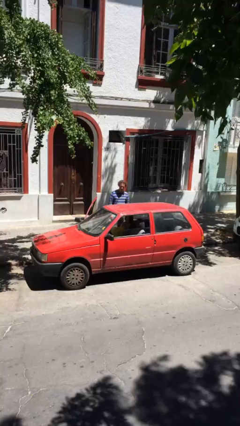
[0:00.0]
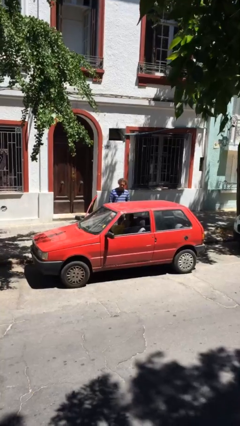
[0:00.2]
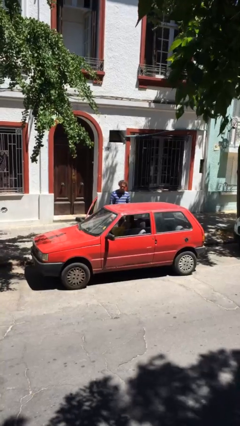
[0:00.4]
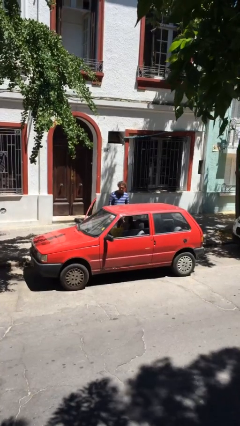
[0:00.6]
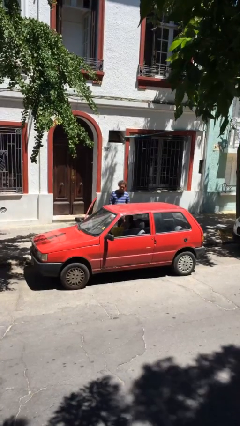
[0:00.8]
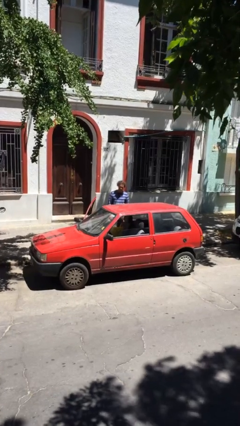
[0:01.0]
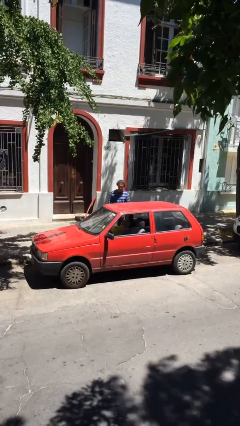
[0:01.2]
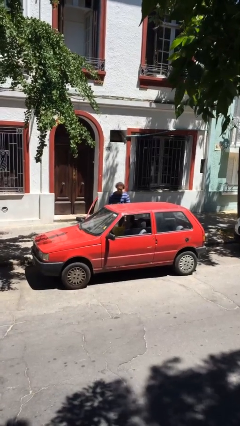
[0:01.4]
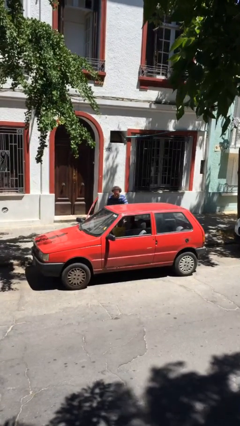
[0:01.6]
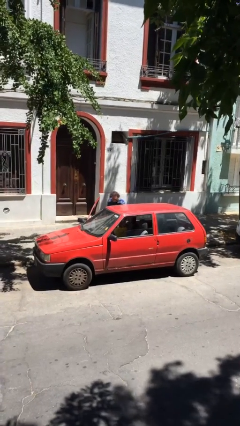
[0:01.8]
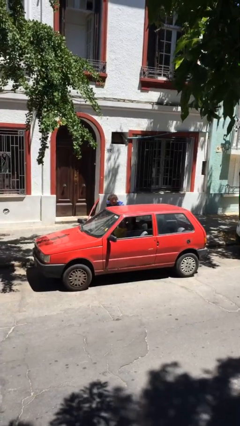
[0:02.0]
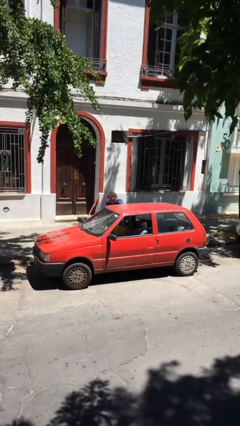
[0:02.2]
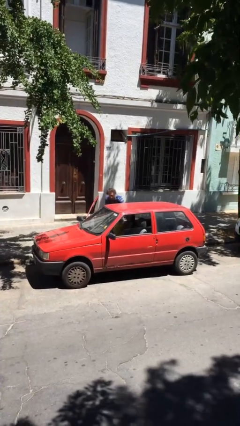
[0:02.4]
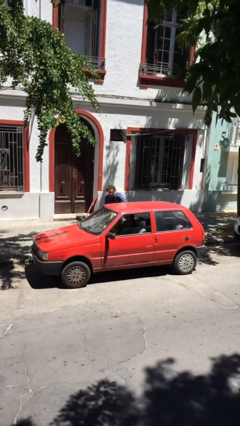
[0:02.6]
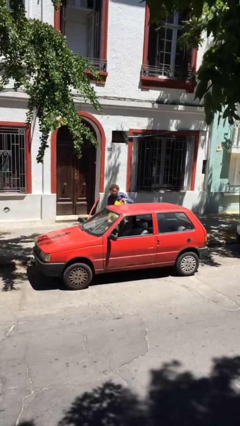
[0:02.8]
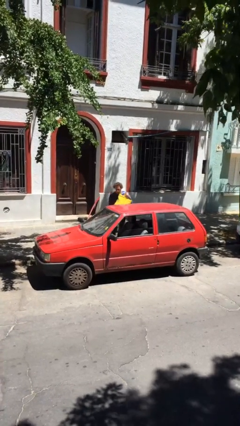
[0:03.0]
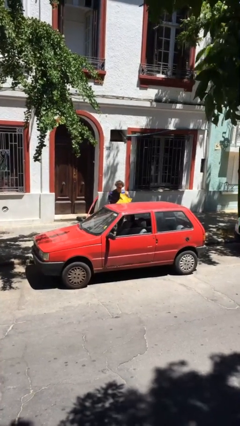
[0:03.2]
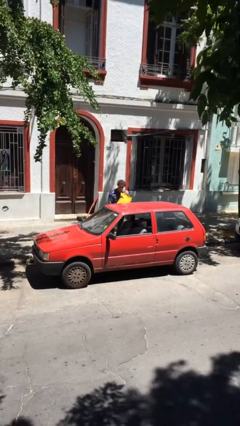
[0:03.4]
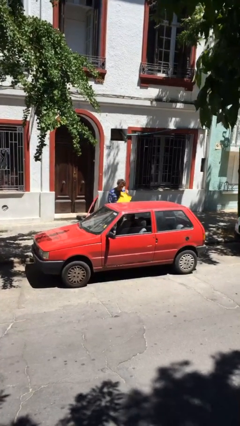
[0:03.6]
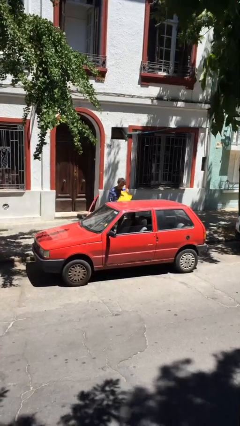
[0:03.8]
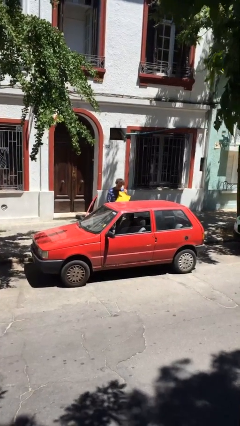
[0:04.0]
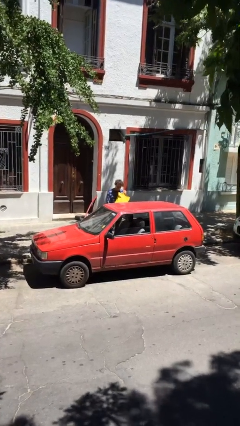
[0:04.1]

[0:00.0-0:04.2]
person unloads car

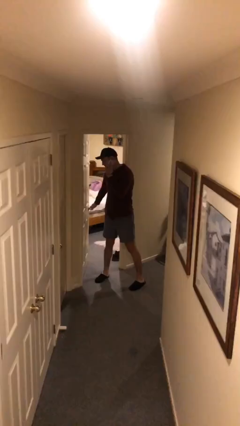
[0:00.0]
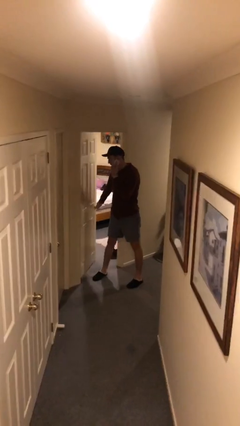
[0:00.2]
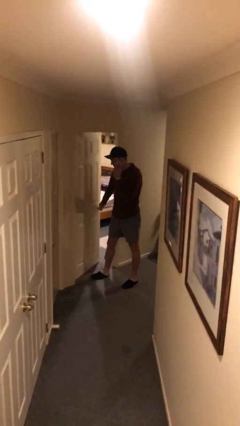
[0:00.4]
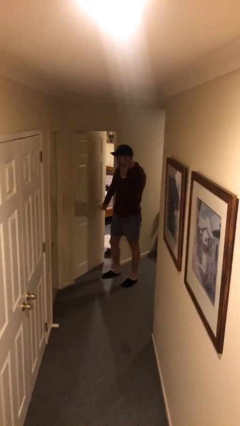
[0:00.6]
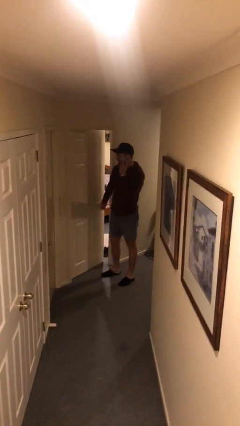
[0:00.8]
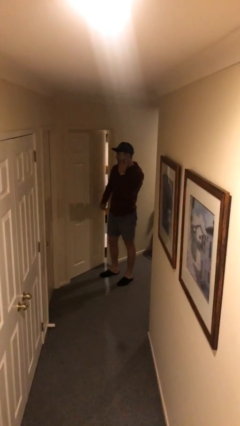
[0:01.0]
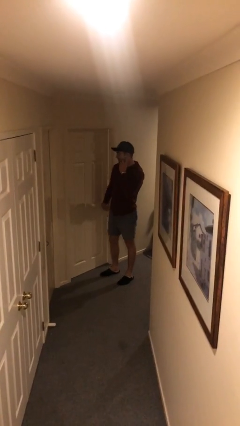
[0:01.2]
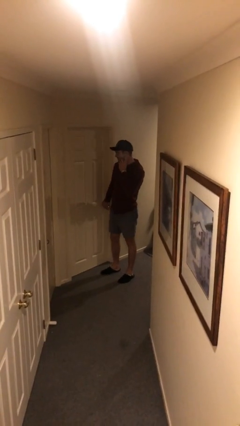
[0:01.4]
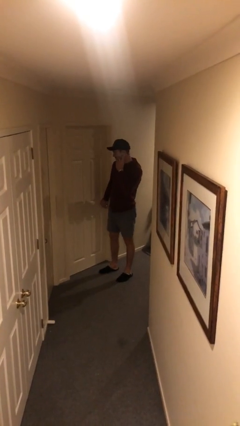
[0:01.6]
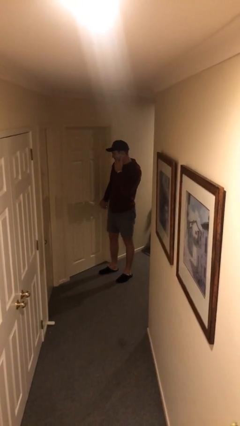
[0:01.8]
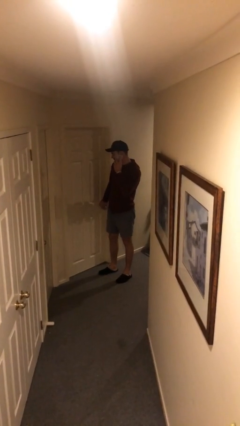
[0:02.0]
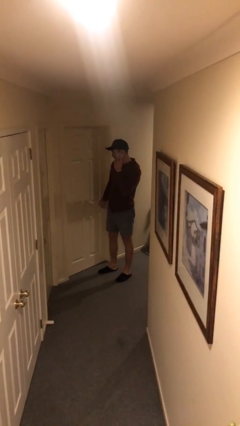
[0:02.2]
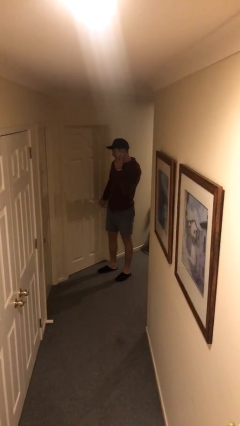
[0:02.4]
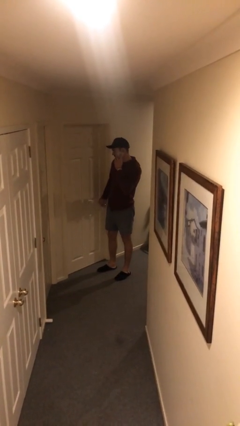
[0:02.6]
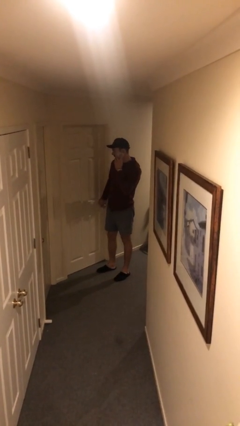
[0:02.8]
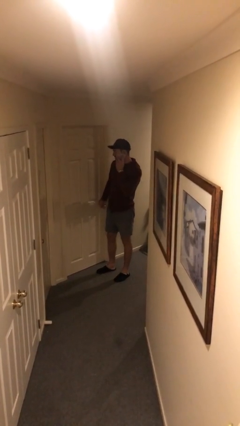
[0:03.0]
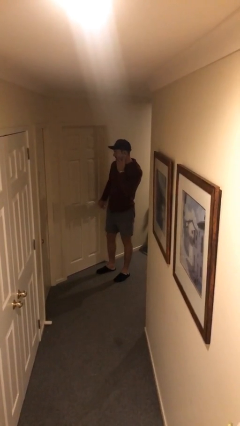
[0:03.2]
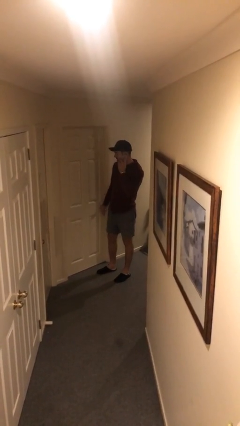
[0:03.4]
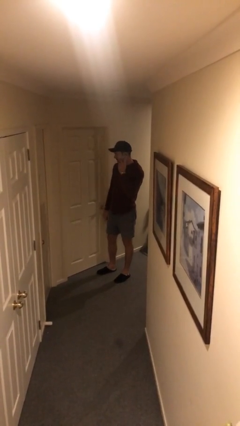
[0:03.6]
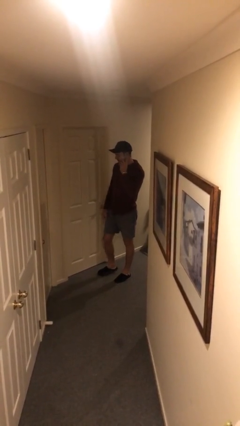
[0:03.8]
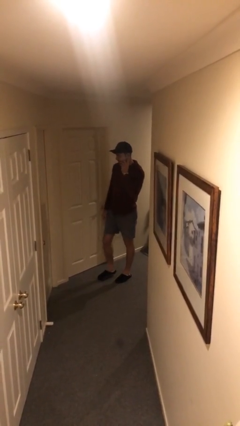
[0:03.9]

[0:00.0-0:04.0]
person closes facility door

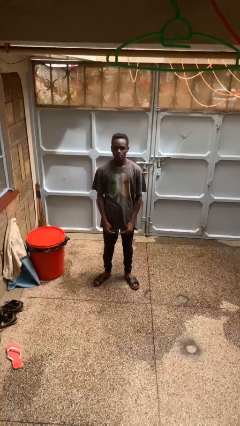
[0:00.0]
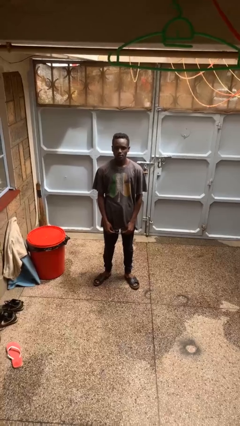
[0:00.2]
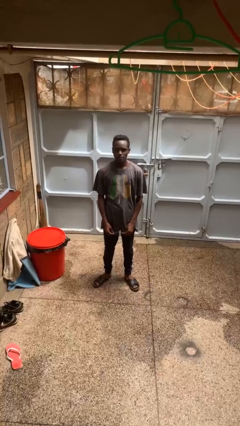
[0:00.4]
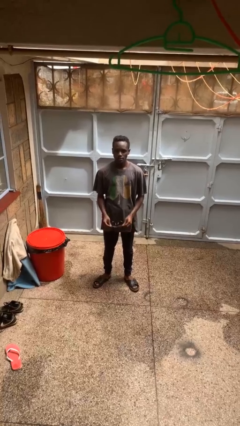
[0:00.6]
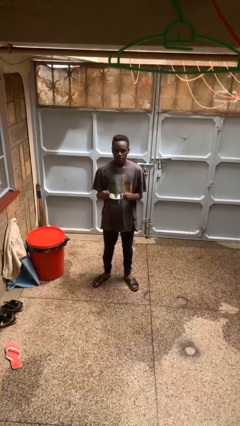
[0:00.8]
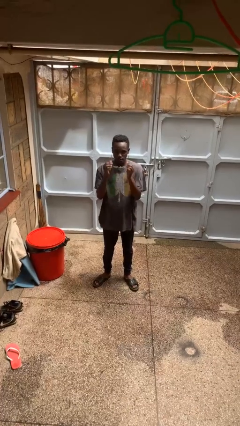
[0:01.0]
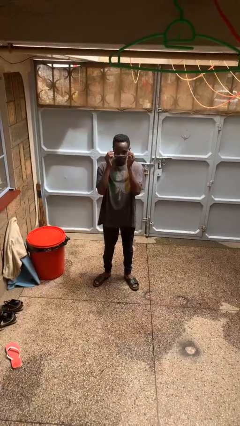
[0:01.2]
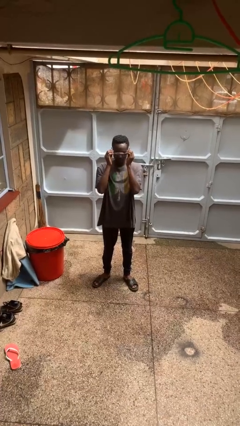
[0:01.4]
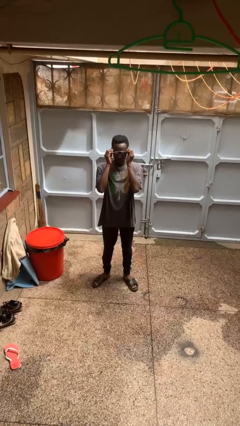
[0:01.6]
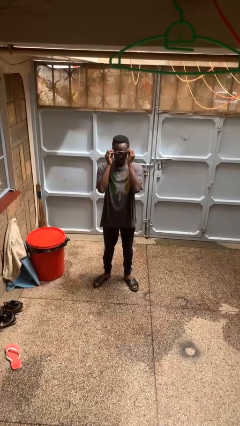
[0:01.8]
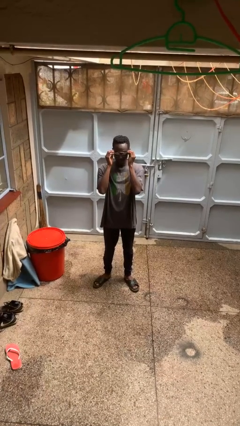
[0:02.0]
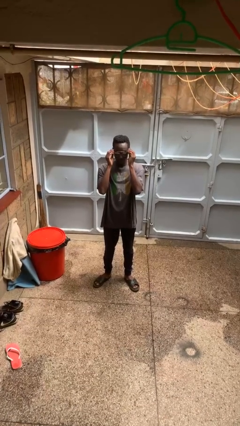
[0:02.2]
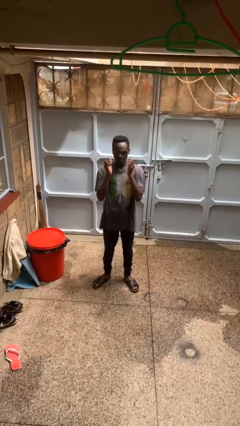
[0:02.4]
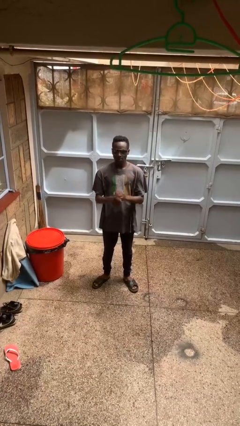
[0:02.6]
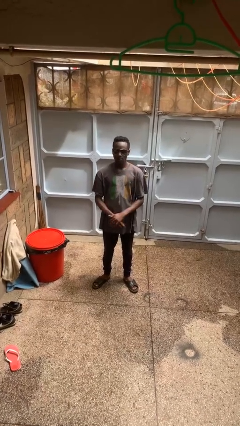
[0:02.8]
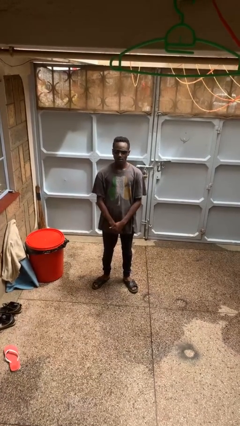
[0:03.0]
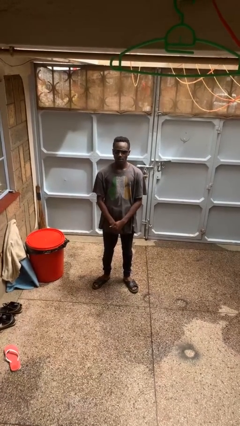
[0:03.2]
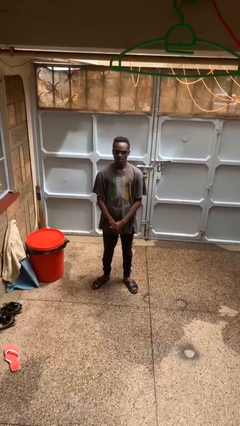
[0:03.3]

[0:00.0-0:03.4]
person puts on sunglasses

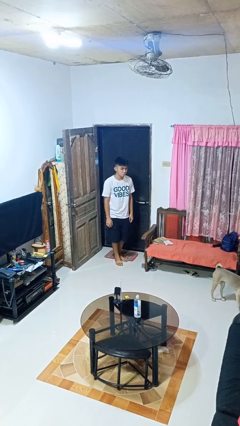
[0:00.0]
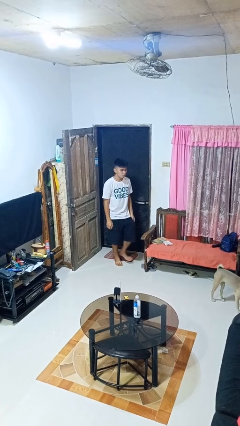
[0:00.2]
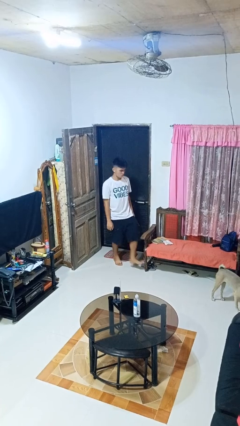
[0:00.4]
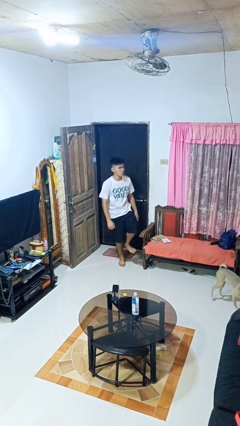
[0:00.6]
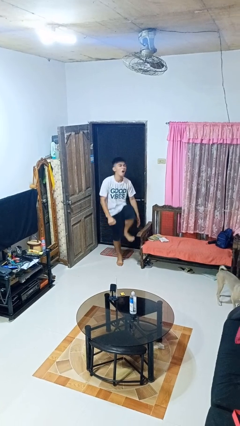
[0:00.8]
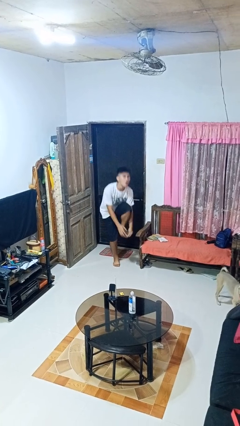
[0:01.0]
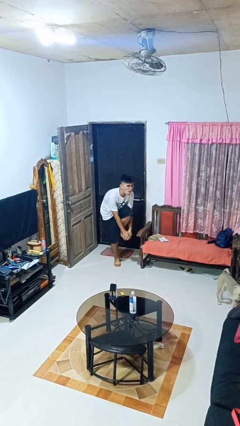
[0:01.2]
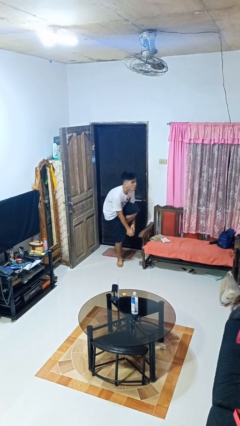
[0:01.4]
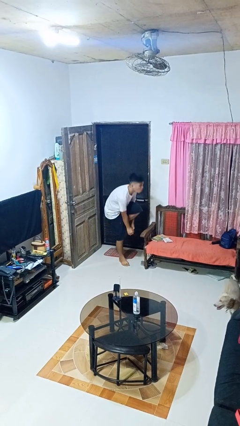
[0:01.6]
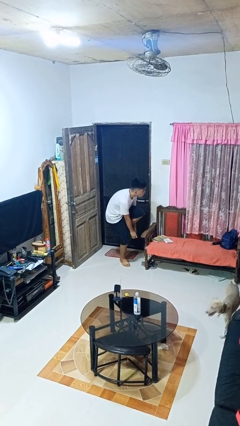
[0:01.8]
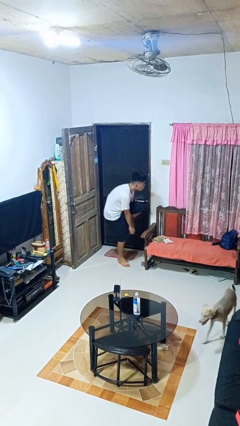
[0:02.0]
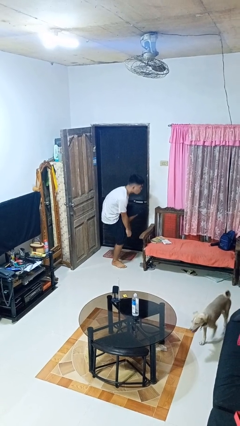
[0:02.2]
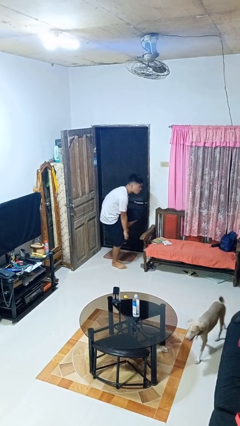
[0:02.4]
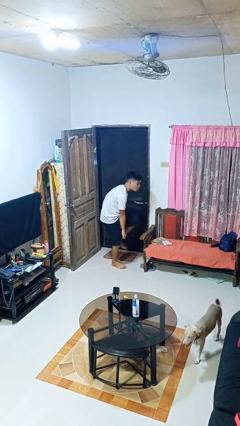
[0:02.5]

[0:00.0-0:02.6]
person stubs toe

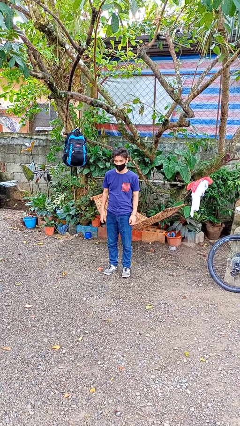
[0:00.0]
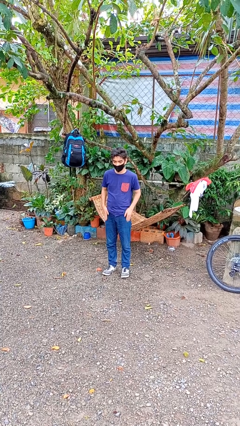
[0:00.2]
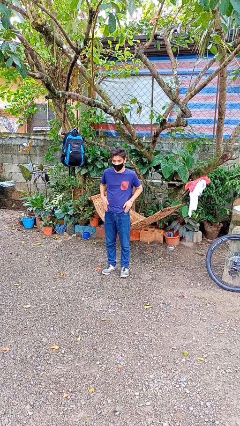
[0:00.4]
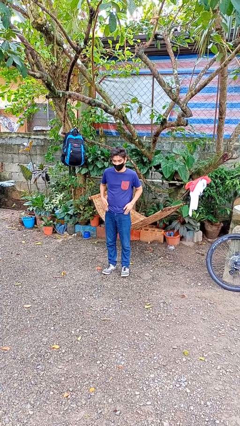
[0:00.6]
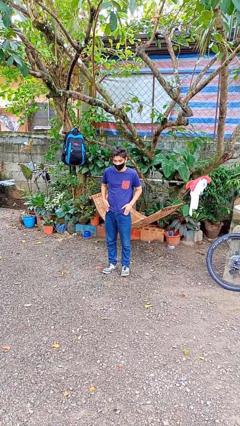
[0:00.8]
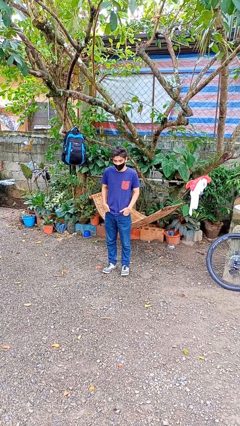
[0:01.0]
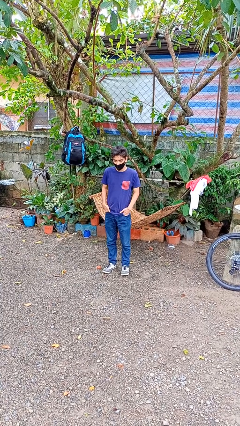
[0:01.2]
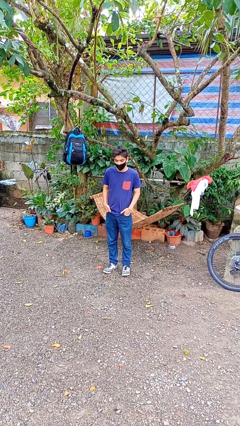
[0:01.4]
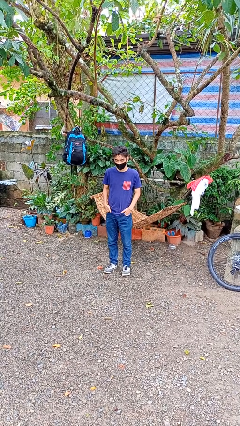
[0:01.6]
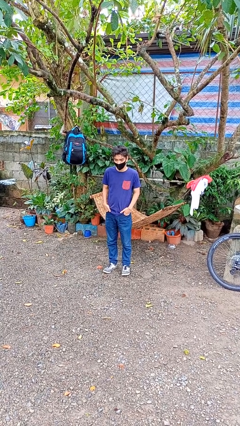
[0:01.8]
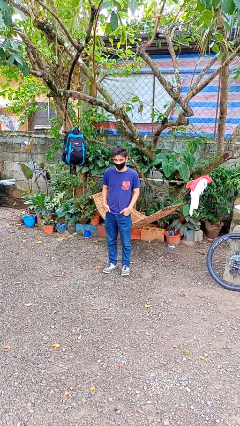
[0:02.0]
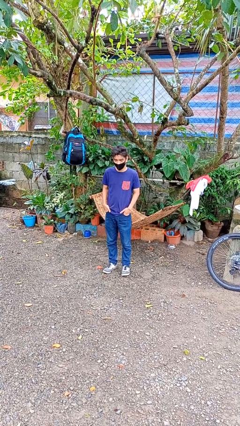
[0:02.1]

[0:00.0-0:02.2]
person puts hands in back pockets

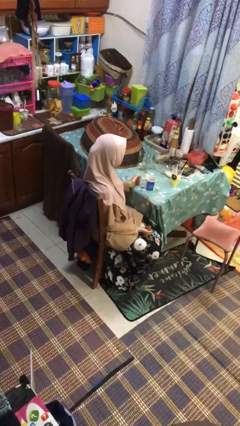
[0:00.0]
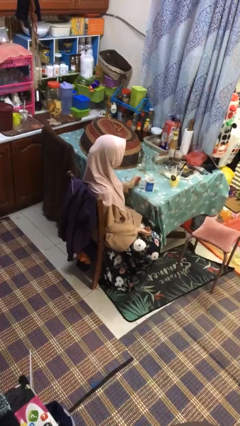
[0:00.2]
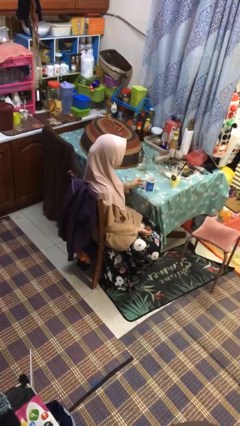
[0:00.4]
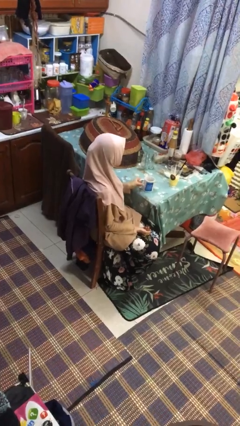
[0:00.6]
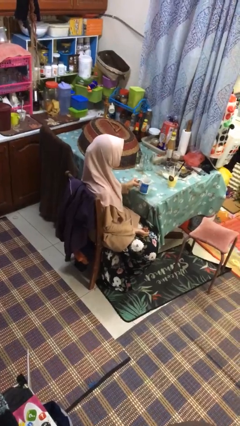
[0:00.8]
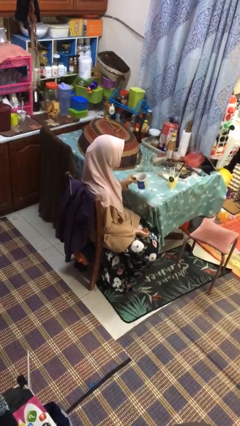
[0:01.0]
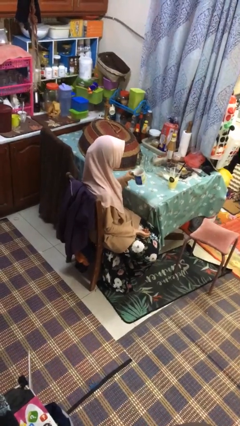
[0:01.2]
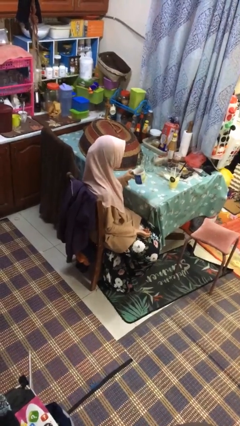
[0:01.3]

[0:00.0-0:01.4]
person picks up object from table
